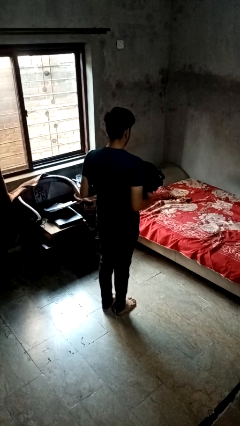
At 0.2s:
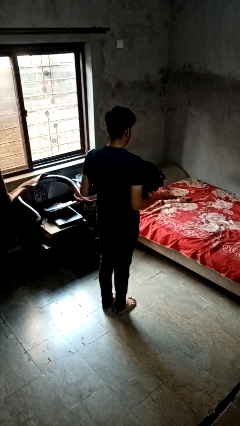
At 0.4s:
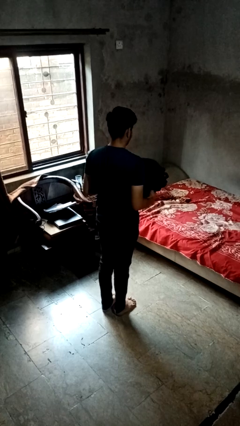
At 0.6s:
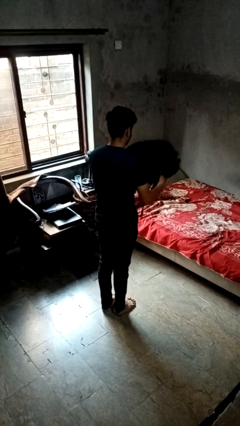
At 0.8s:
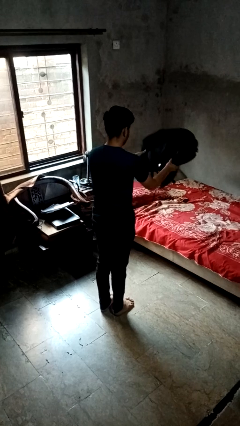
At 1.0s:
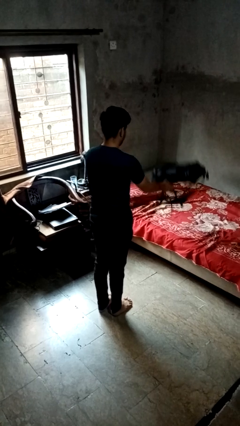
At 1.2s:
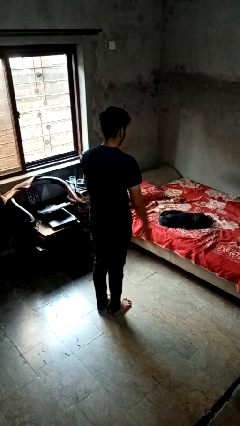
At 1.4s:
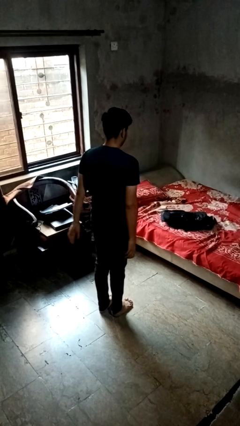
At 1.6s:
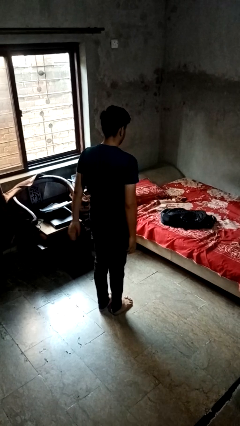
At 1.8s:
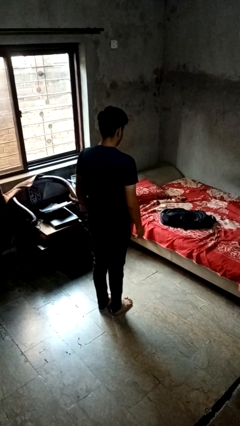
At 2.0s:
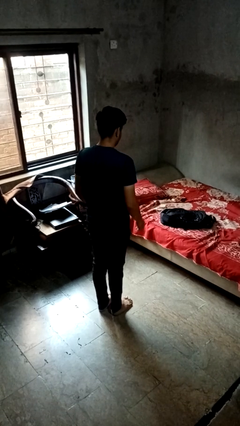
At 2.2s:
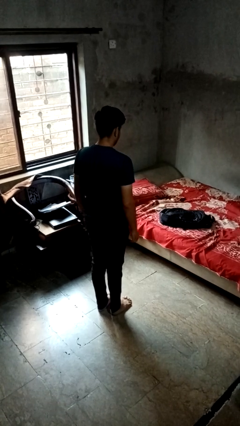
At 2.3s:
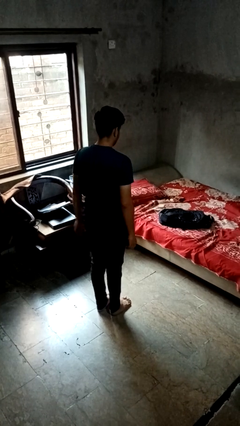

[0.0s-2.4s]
person throws object on bed

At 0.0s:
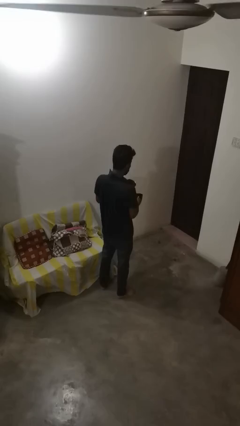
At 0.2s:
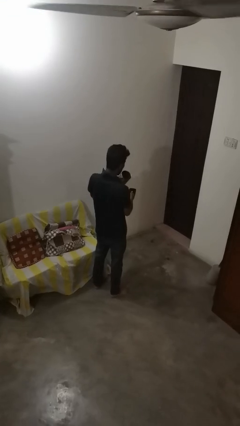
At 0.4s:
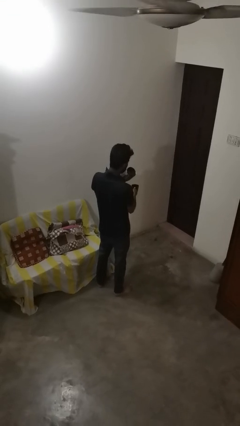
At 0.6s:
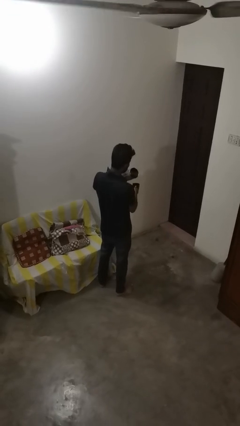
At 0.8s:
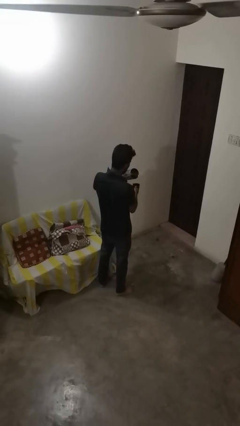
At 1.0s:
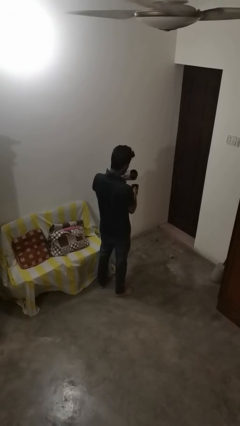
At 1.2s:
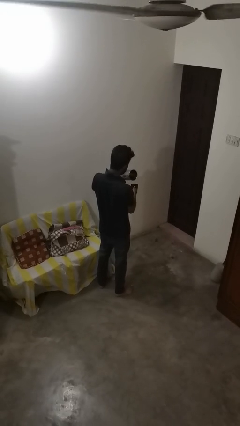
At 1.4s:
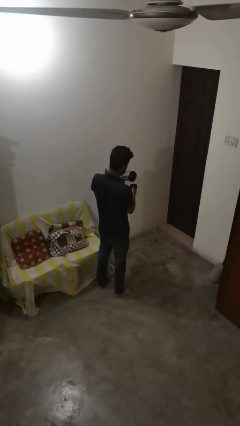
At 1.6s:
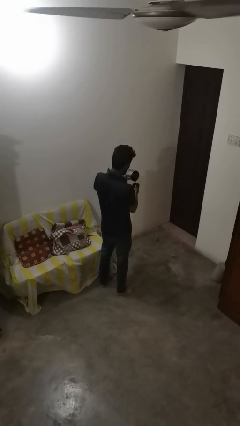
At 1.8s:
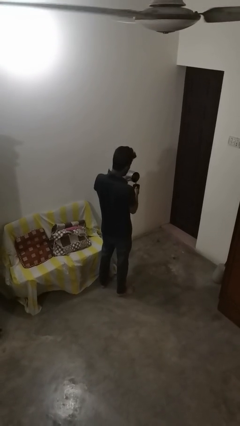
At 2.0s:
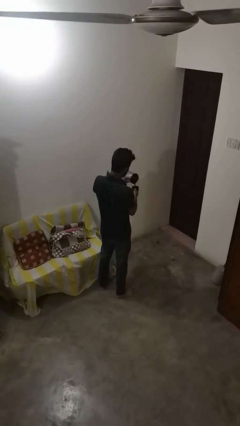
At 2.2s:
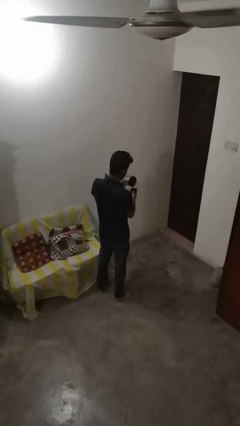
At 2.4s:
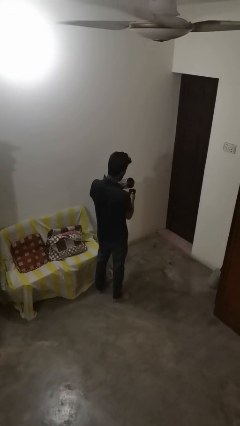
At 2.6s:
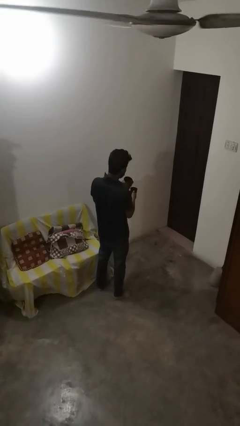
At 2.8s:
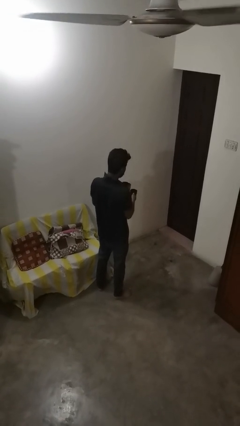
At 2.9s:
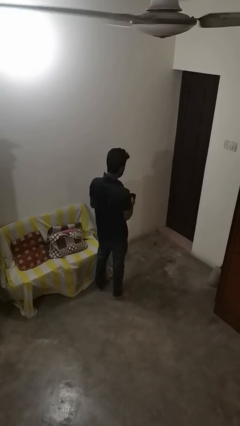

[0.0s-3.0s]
person pours coffee into mug

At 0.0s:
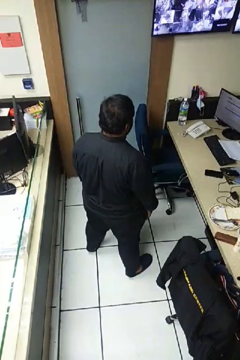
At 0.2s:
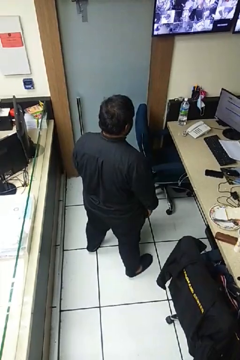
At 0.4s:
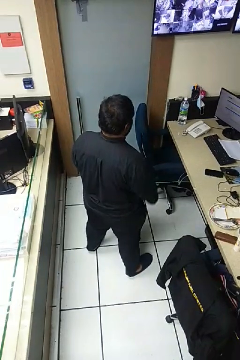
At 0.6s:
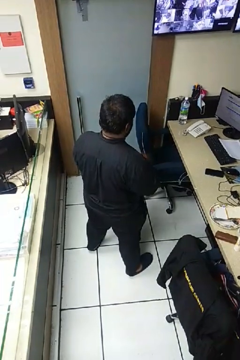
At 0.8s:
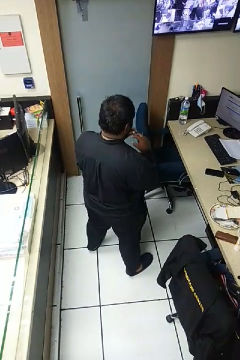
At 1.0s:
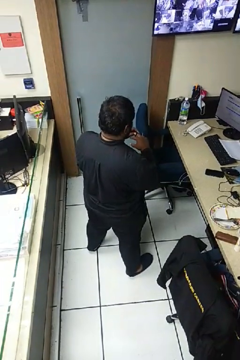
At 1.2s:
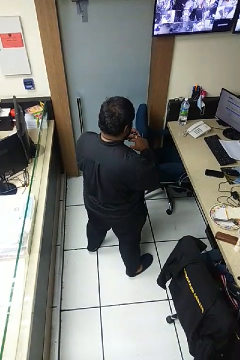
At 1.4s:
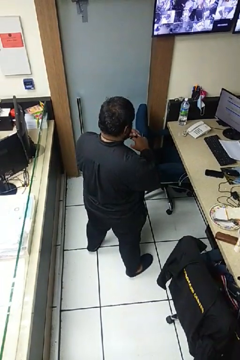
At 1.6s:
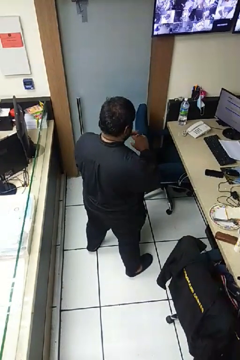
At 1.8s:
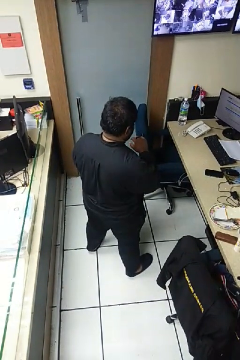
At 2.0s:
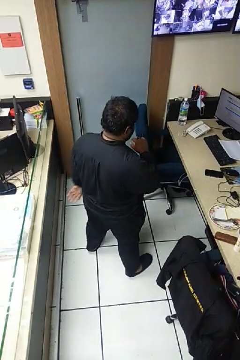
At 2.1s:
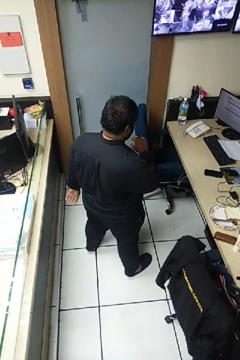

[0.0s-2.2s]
person puts on ring

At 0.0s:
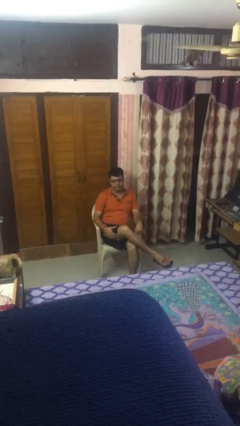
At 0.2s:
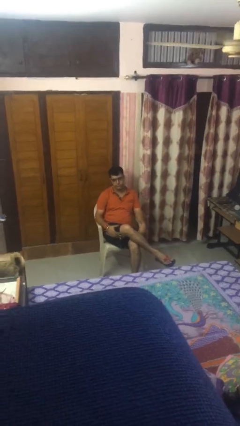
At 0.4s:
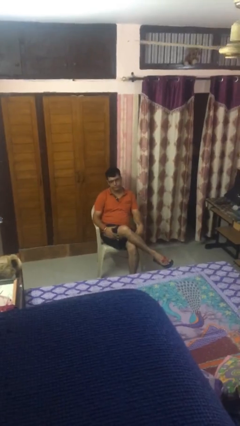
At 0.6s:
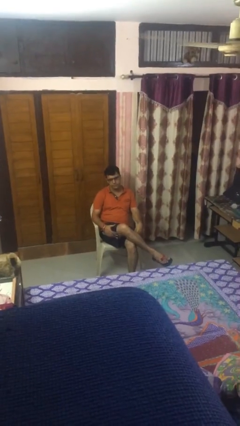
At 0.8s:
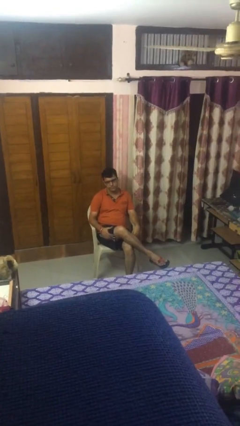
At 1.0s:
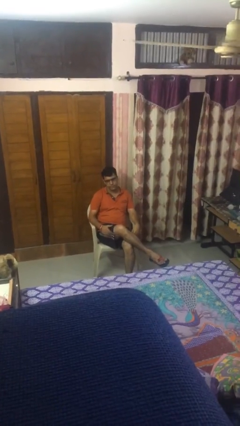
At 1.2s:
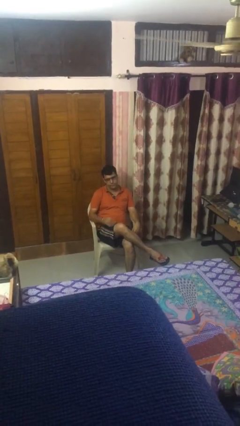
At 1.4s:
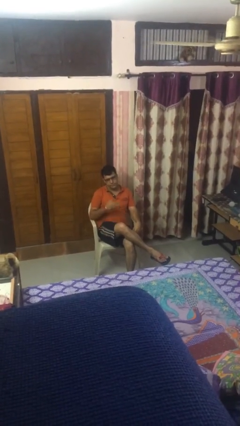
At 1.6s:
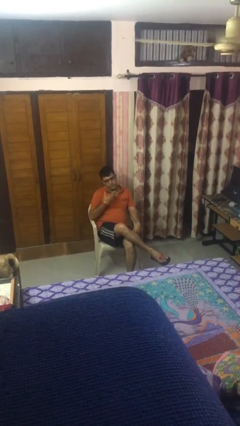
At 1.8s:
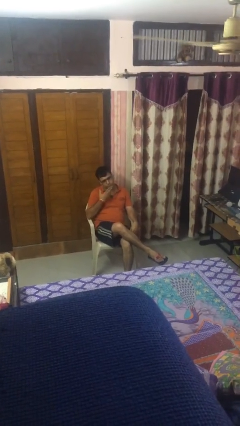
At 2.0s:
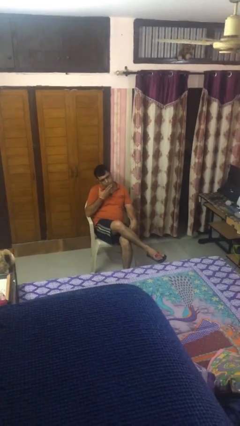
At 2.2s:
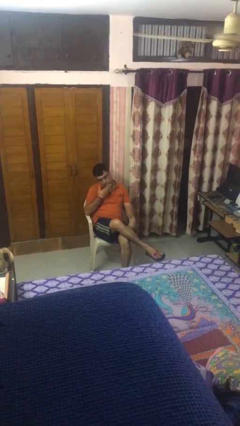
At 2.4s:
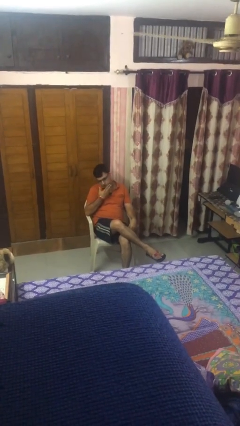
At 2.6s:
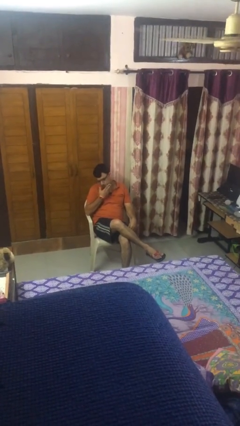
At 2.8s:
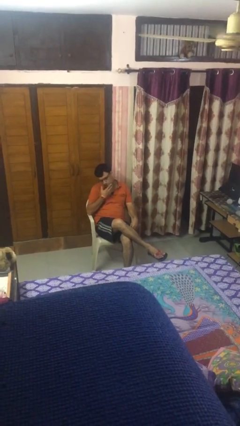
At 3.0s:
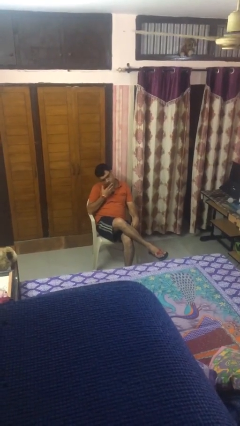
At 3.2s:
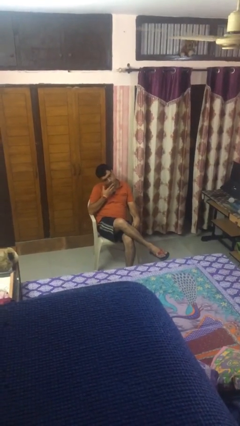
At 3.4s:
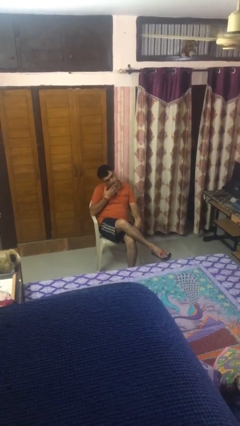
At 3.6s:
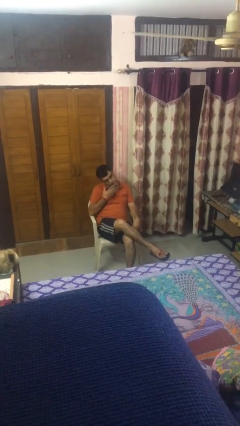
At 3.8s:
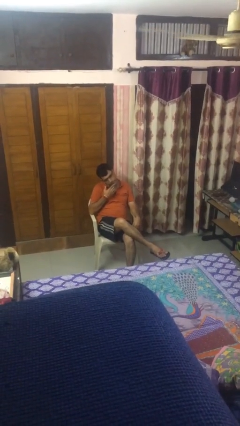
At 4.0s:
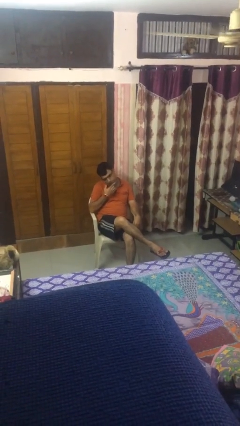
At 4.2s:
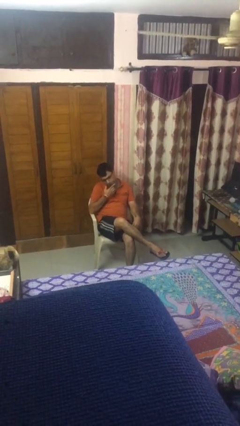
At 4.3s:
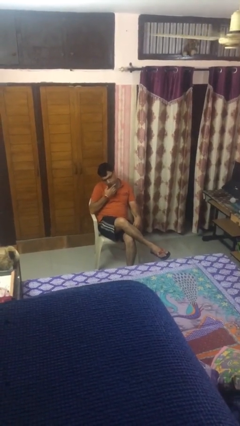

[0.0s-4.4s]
person strokes chin

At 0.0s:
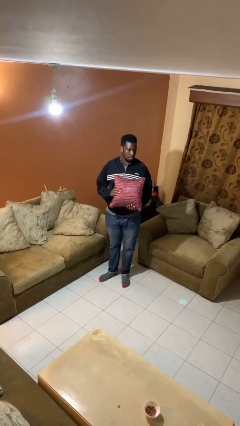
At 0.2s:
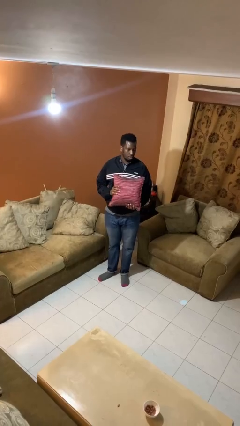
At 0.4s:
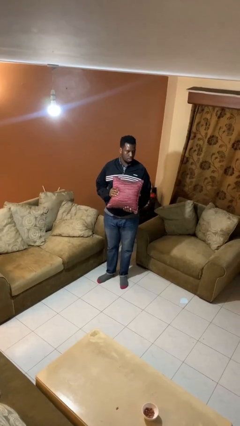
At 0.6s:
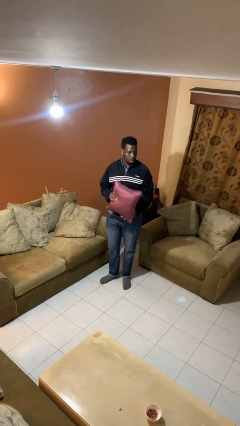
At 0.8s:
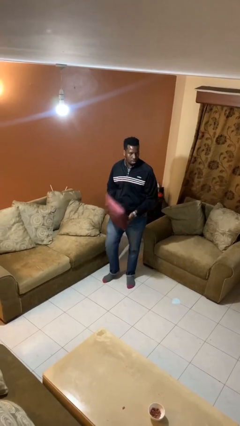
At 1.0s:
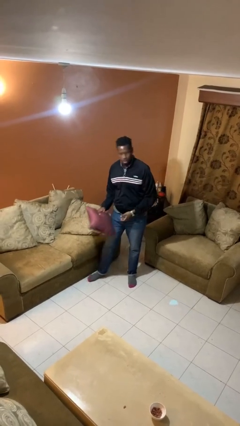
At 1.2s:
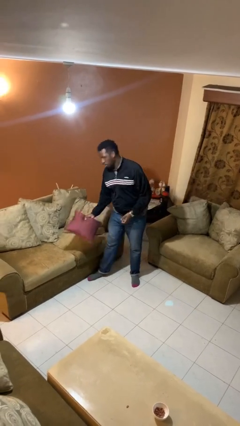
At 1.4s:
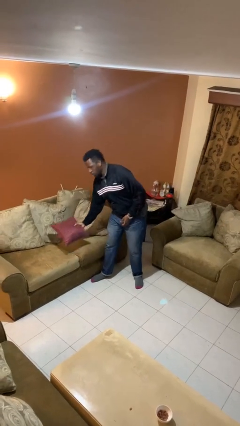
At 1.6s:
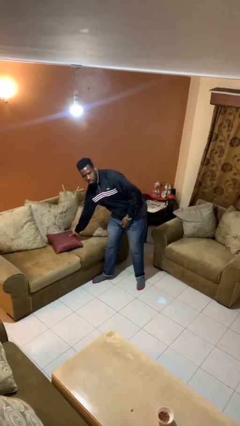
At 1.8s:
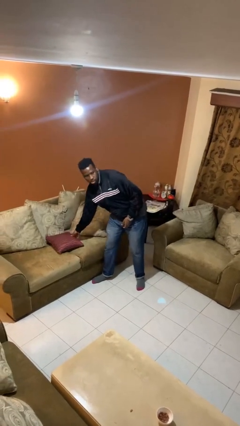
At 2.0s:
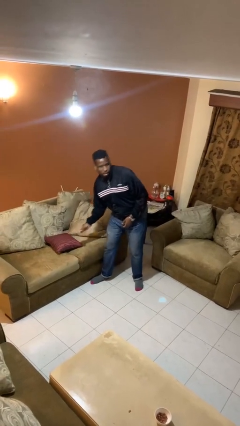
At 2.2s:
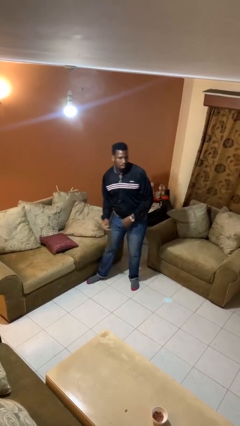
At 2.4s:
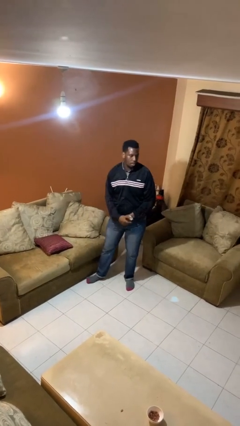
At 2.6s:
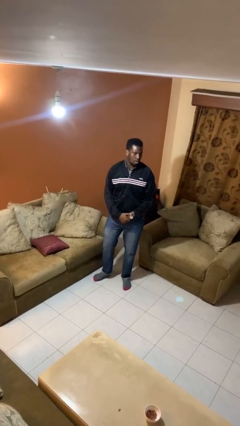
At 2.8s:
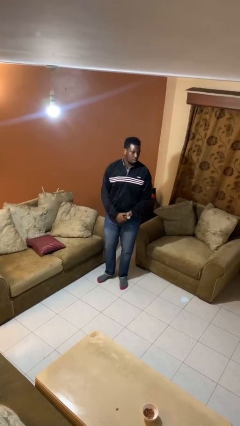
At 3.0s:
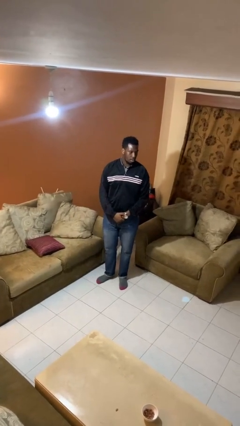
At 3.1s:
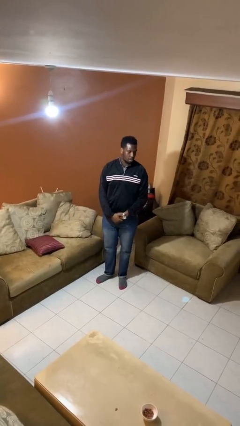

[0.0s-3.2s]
person puts down object on couch

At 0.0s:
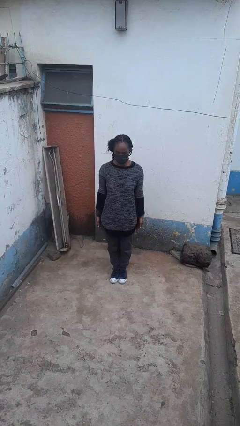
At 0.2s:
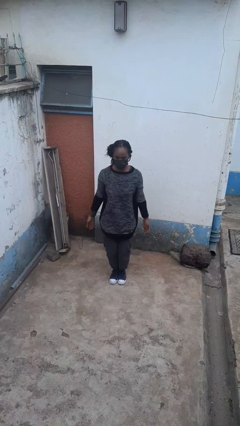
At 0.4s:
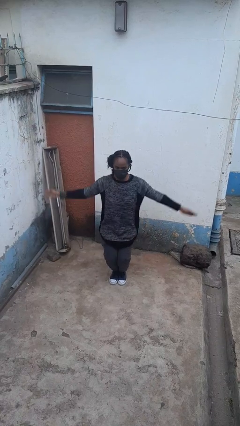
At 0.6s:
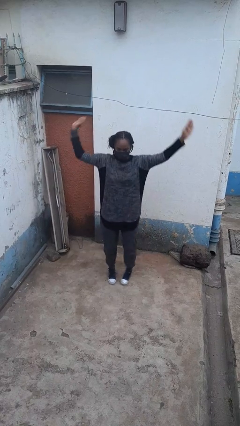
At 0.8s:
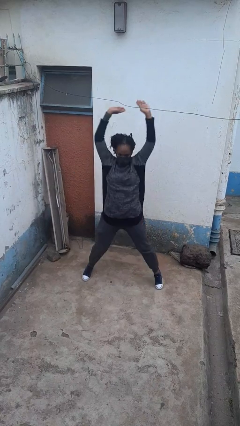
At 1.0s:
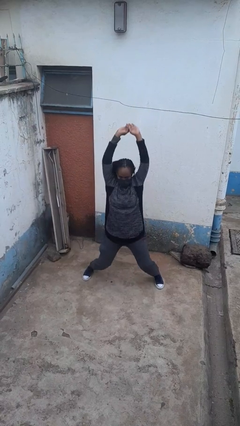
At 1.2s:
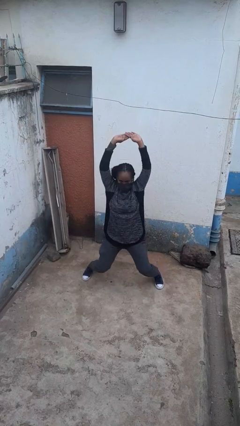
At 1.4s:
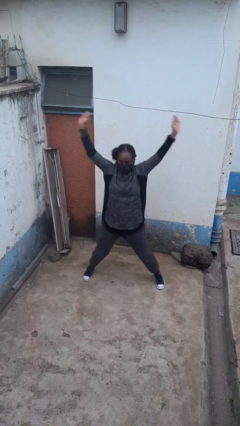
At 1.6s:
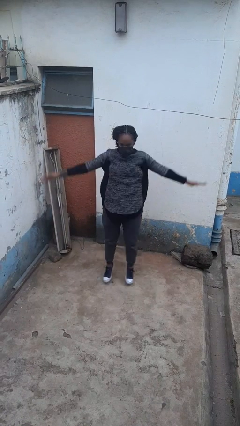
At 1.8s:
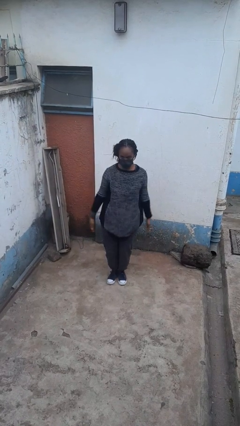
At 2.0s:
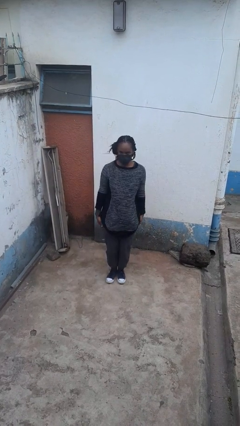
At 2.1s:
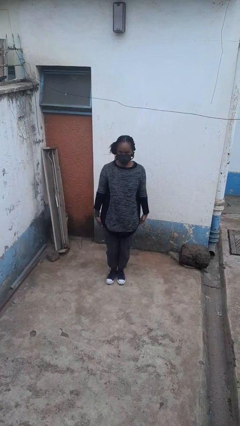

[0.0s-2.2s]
person exercises with jumping jacks

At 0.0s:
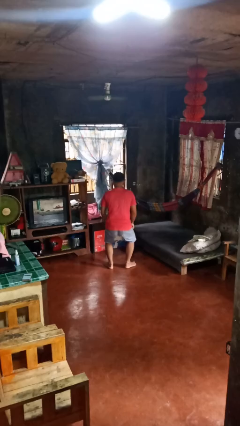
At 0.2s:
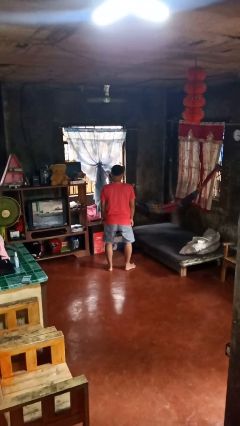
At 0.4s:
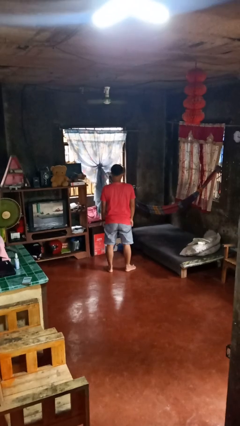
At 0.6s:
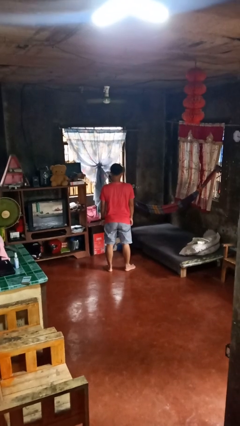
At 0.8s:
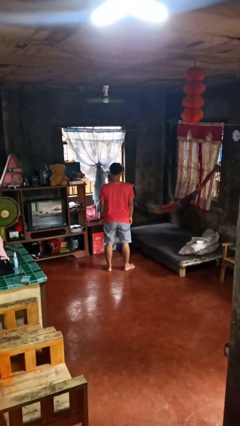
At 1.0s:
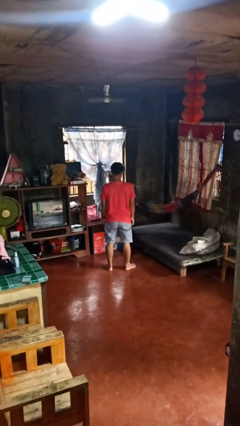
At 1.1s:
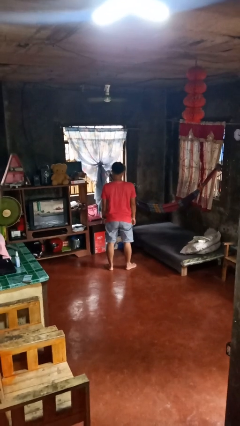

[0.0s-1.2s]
person stands up
